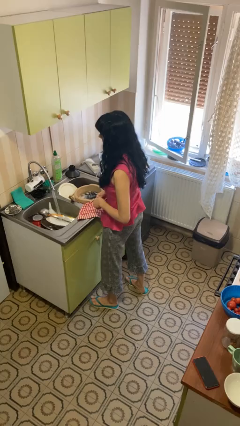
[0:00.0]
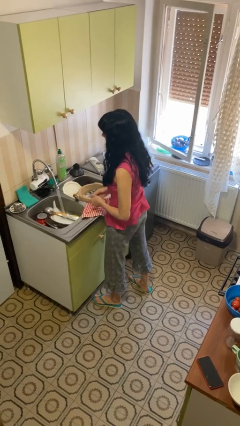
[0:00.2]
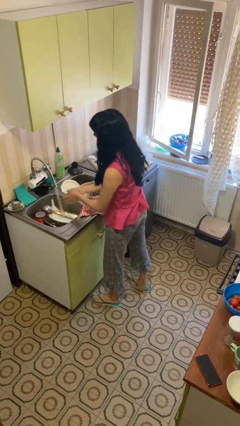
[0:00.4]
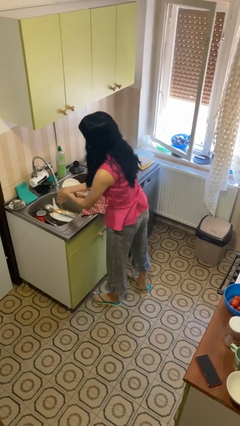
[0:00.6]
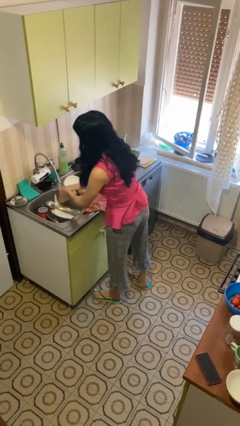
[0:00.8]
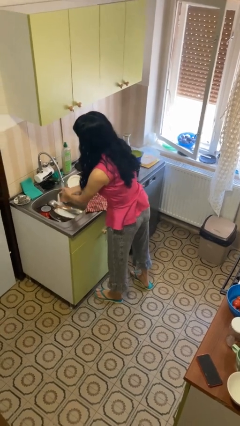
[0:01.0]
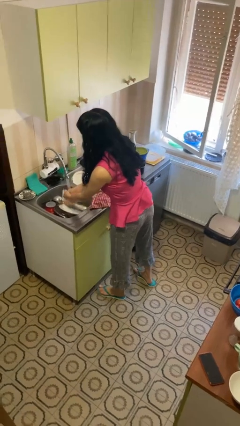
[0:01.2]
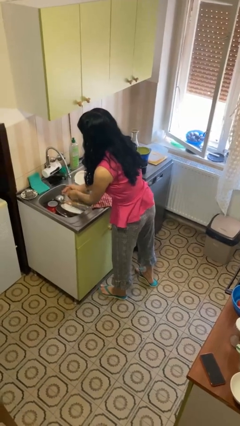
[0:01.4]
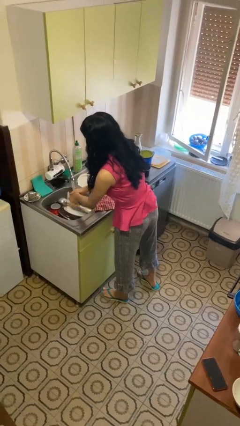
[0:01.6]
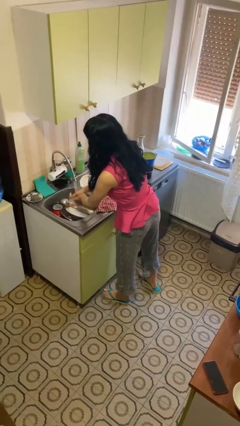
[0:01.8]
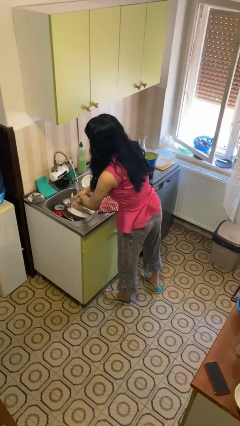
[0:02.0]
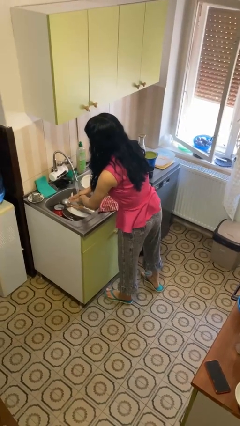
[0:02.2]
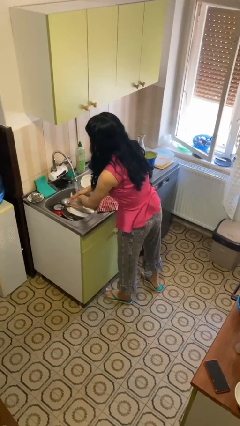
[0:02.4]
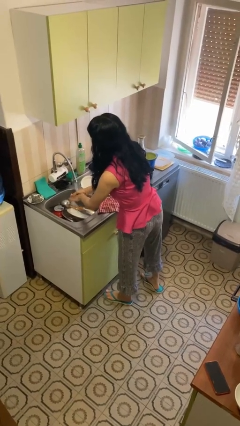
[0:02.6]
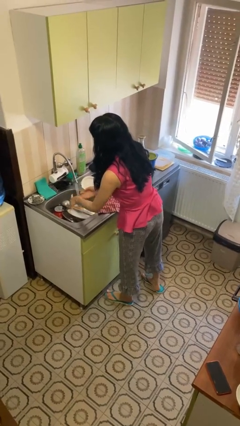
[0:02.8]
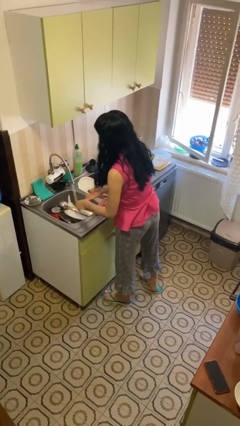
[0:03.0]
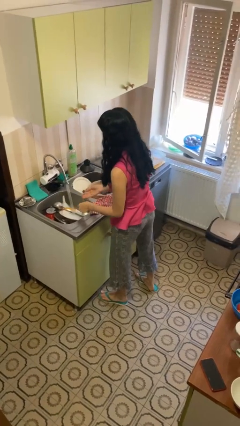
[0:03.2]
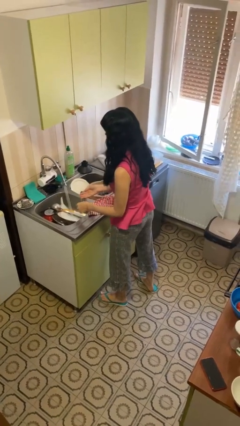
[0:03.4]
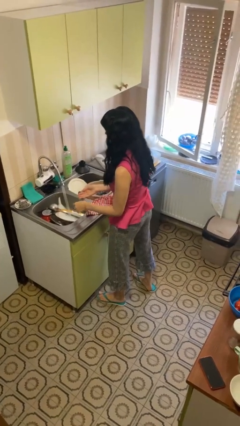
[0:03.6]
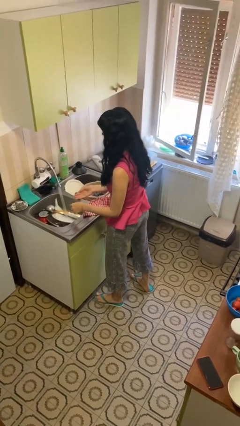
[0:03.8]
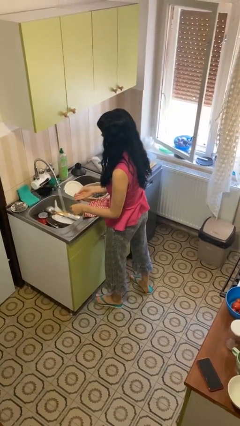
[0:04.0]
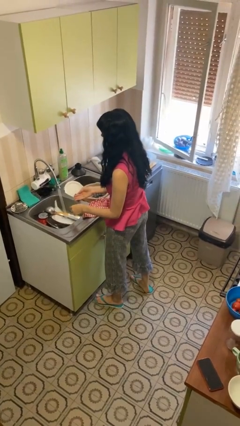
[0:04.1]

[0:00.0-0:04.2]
person washes hands

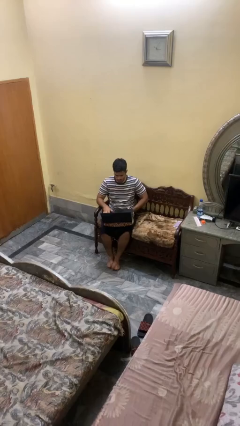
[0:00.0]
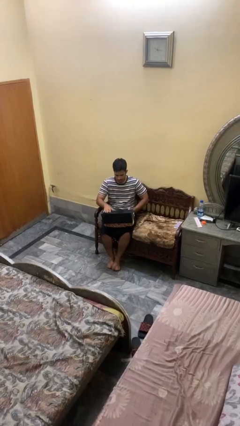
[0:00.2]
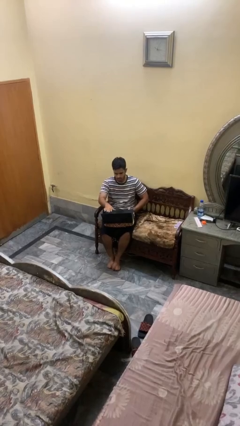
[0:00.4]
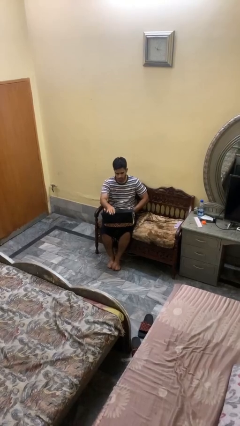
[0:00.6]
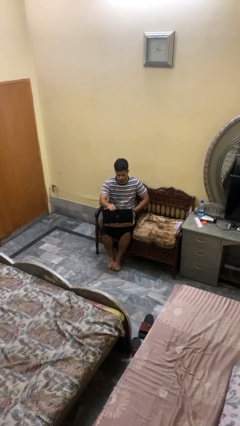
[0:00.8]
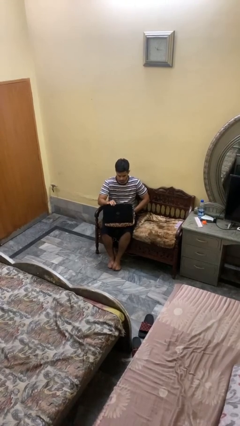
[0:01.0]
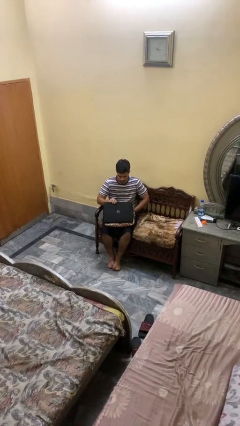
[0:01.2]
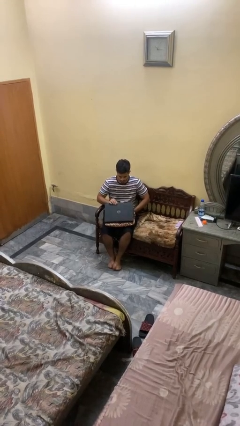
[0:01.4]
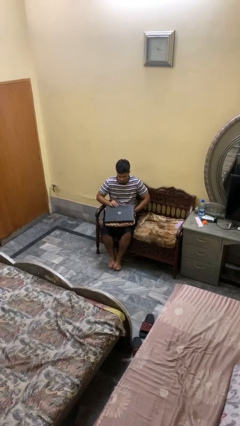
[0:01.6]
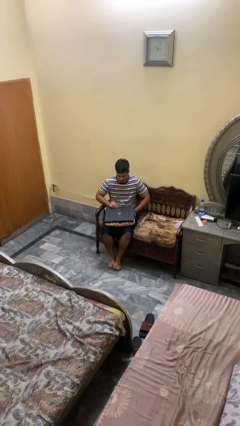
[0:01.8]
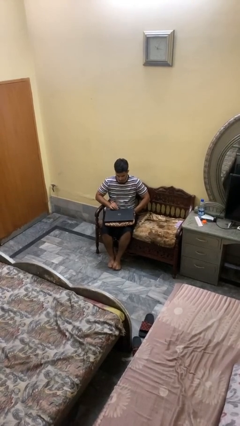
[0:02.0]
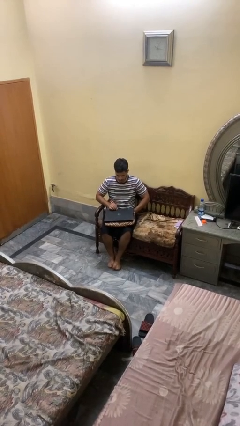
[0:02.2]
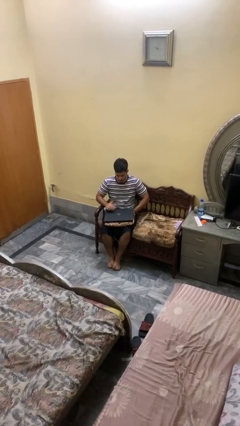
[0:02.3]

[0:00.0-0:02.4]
person closes laptop

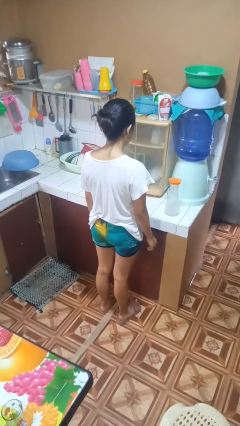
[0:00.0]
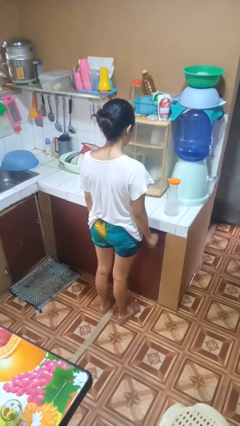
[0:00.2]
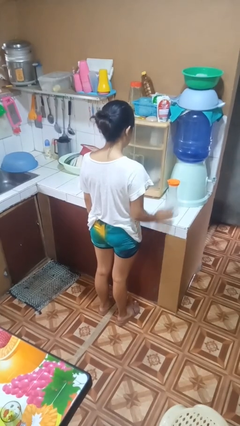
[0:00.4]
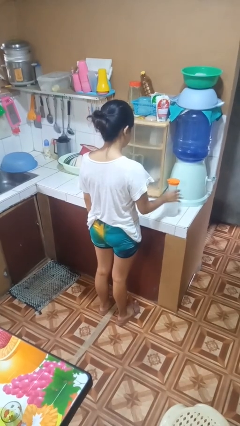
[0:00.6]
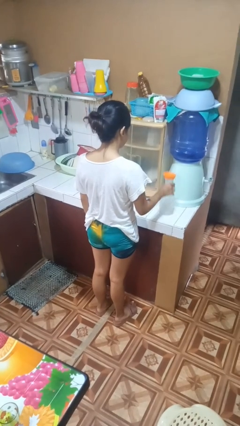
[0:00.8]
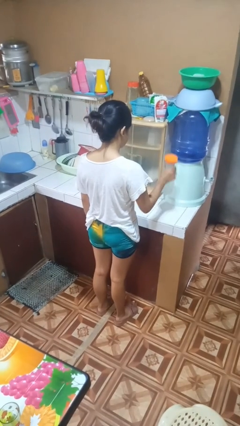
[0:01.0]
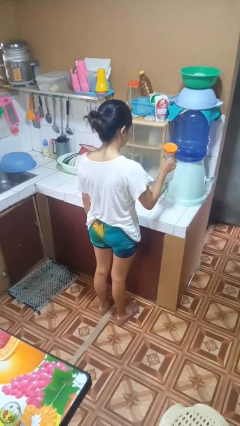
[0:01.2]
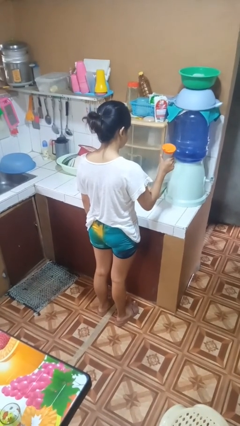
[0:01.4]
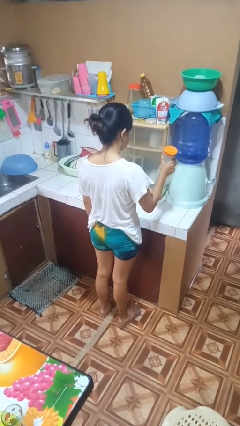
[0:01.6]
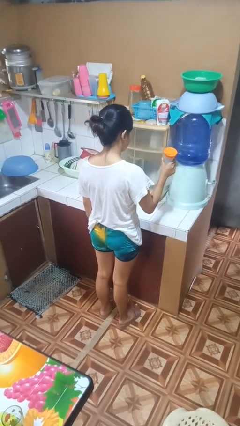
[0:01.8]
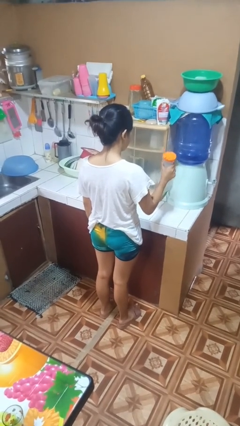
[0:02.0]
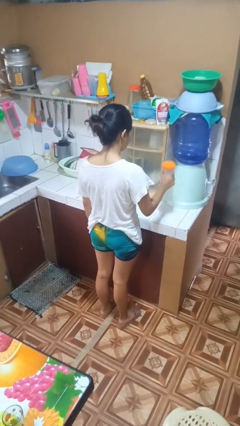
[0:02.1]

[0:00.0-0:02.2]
person picks up object from countertop

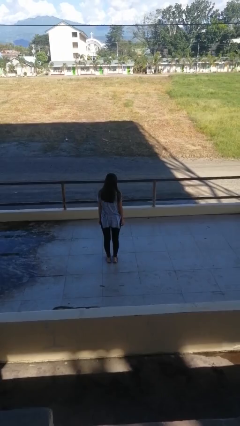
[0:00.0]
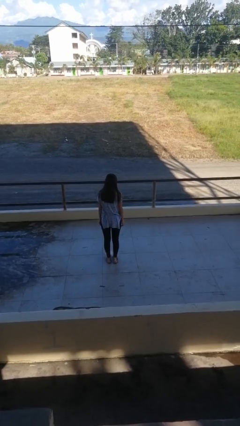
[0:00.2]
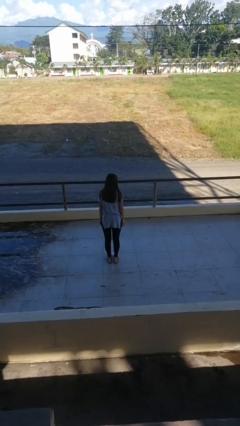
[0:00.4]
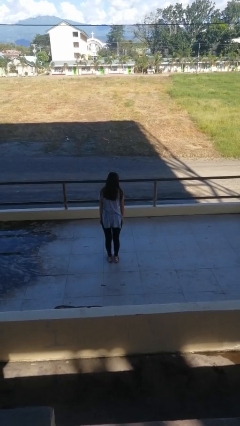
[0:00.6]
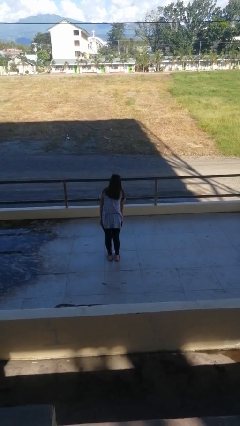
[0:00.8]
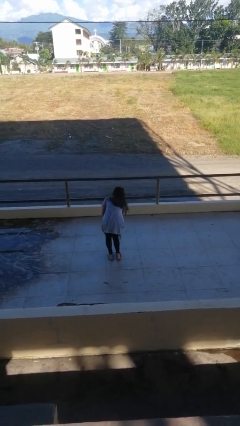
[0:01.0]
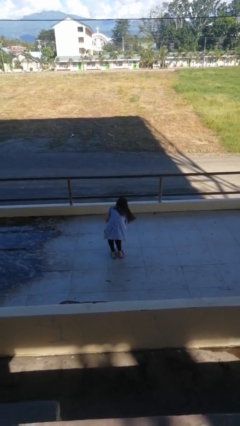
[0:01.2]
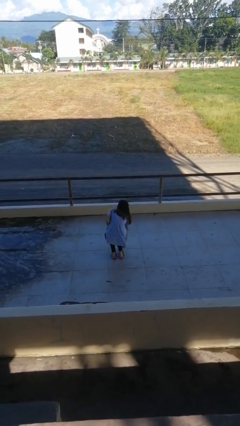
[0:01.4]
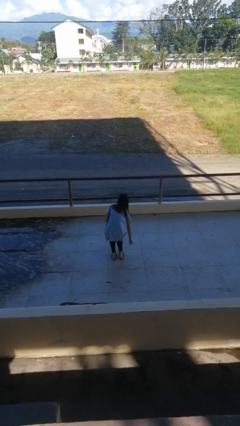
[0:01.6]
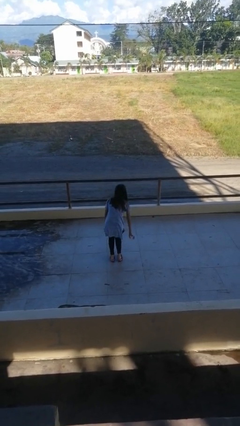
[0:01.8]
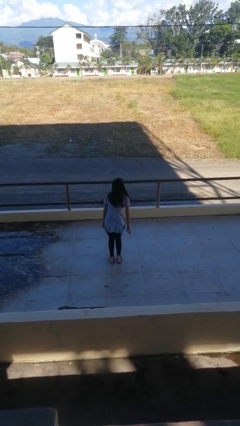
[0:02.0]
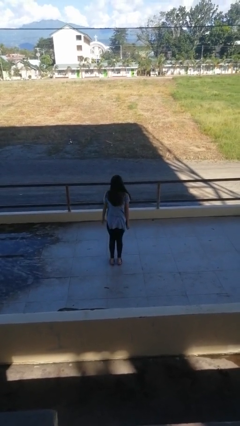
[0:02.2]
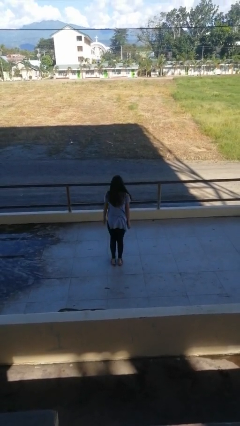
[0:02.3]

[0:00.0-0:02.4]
person picks up object from floor

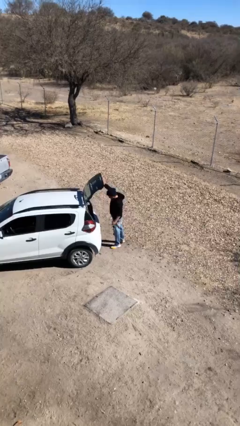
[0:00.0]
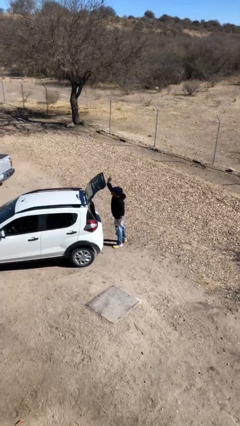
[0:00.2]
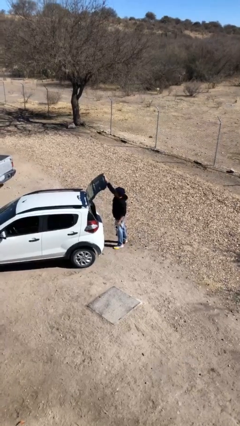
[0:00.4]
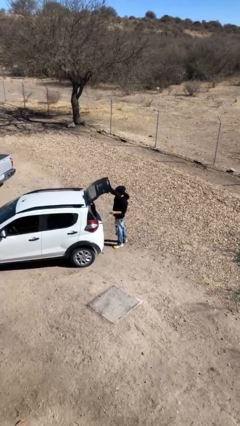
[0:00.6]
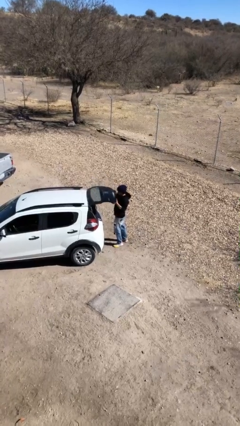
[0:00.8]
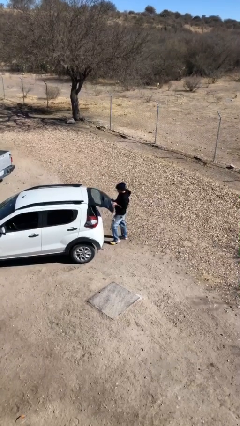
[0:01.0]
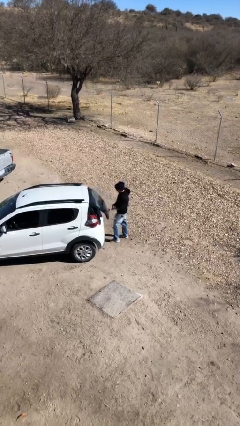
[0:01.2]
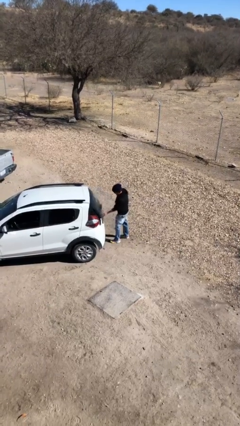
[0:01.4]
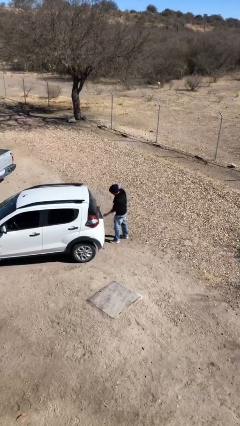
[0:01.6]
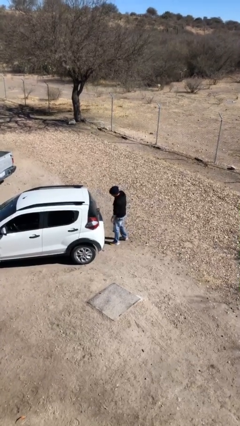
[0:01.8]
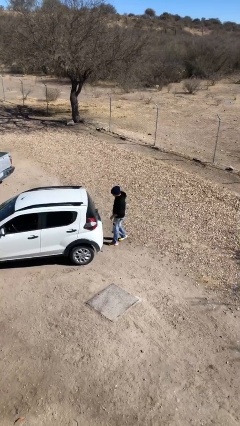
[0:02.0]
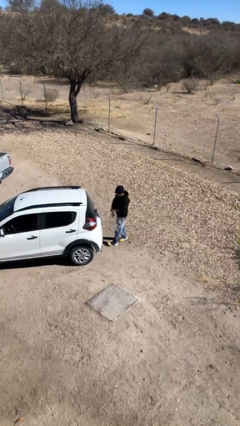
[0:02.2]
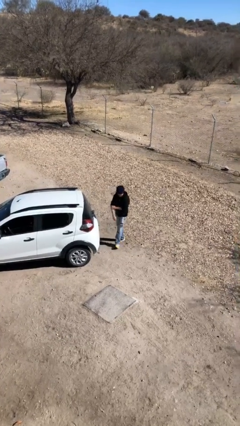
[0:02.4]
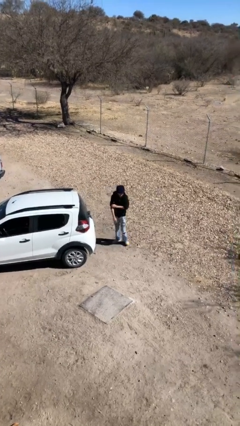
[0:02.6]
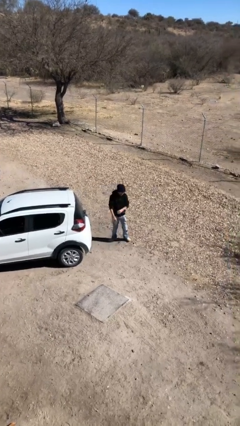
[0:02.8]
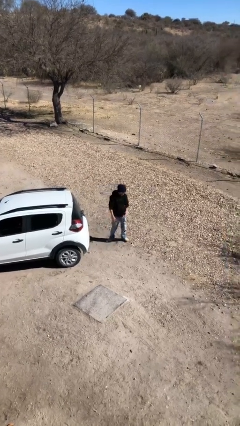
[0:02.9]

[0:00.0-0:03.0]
person closes car trunk

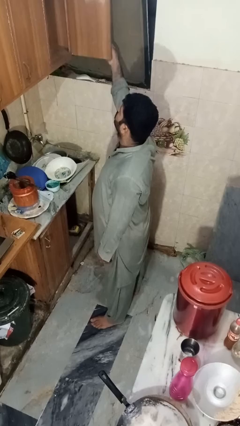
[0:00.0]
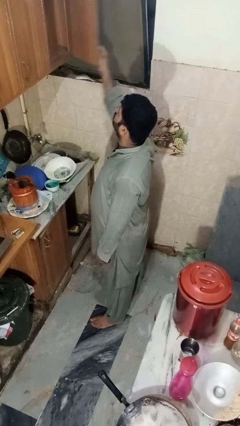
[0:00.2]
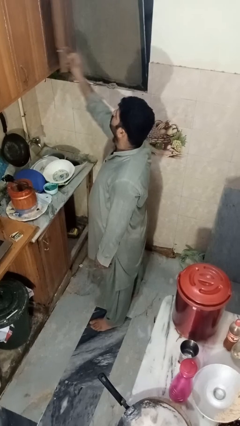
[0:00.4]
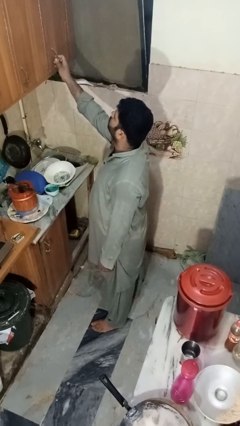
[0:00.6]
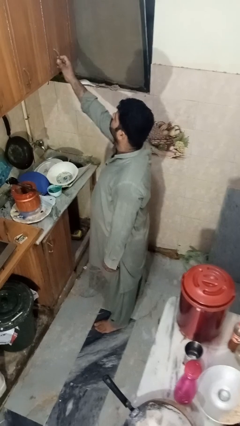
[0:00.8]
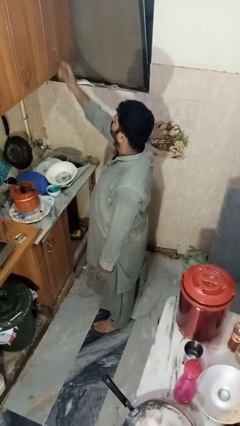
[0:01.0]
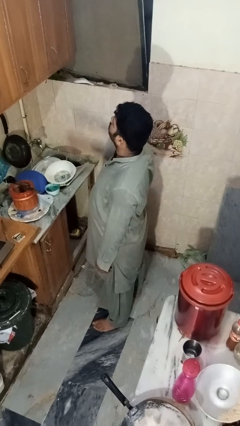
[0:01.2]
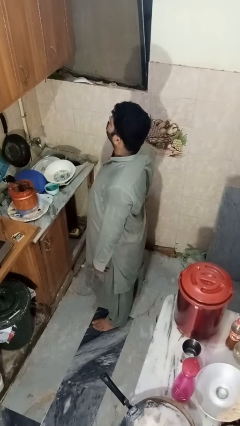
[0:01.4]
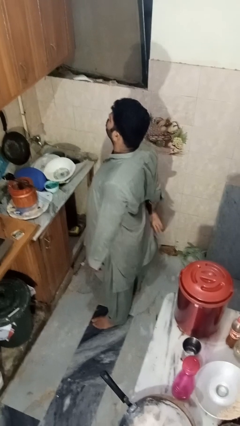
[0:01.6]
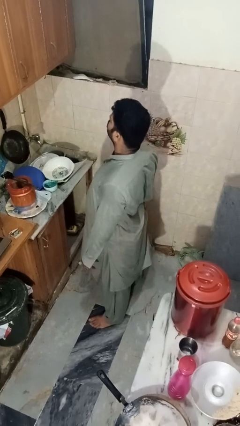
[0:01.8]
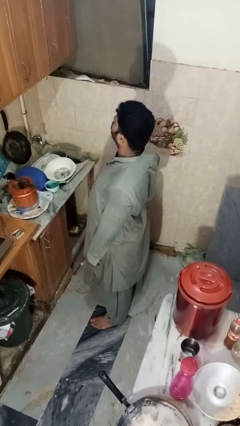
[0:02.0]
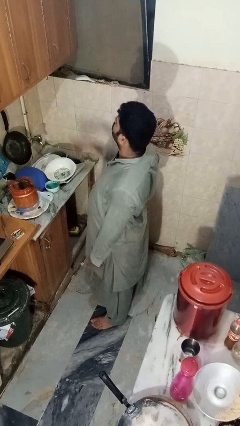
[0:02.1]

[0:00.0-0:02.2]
person closes cabinet

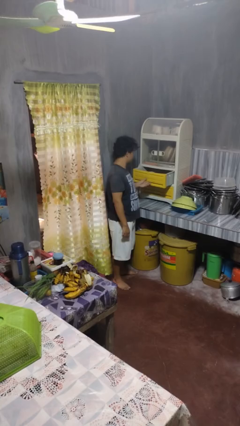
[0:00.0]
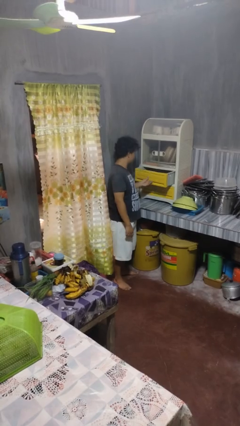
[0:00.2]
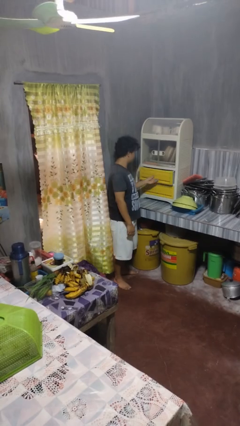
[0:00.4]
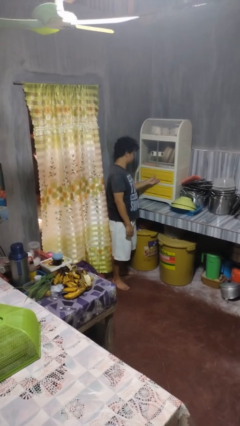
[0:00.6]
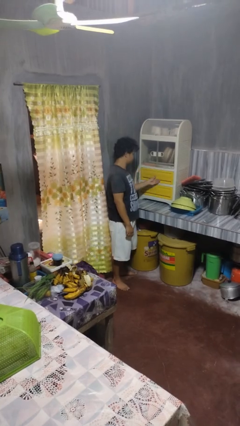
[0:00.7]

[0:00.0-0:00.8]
person closes kitchen drawer
